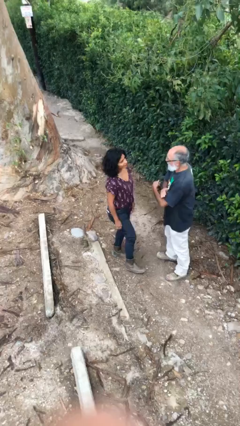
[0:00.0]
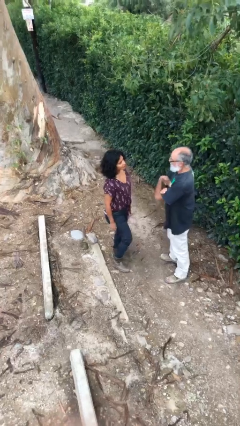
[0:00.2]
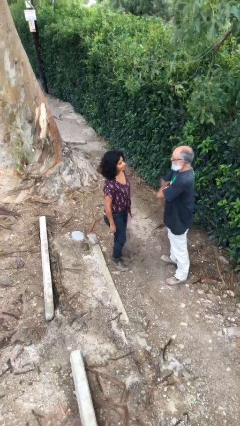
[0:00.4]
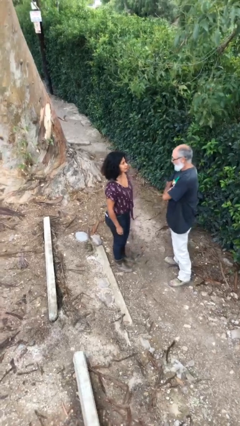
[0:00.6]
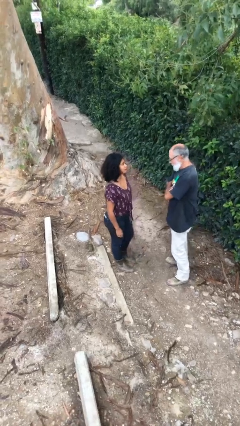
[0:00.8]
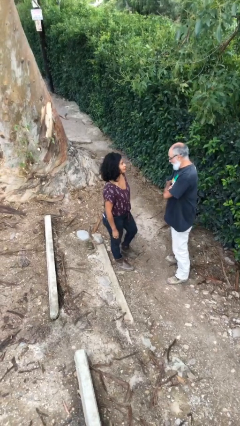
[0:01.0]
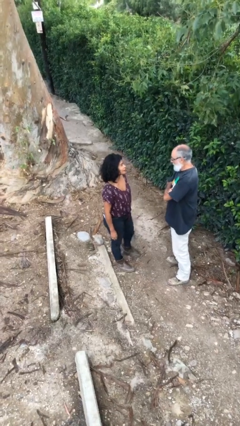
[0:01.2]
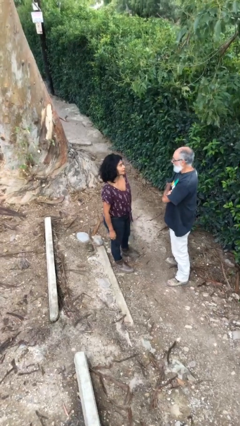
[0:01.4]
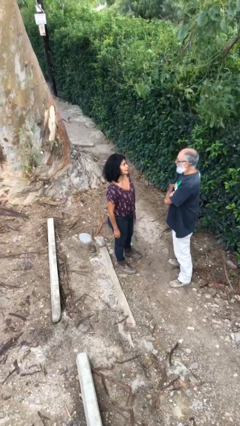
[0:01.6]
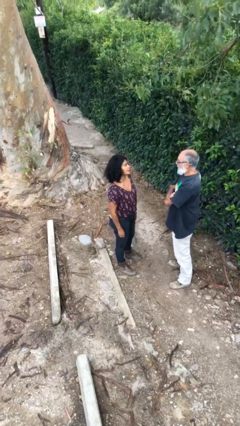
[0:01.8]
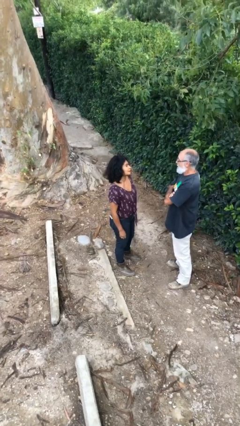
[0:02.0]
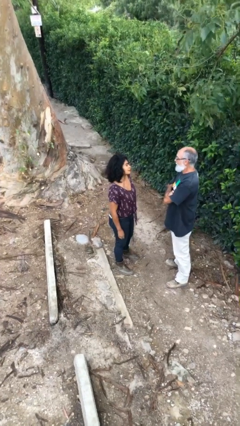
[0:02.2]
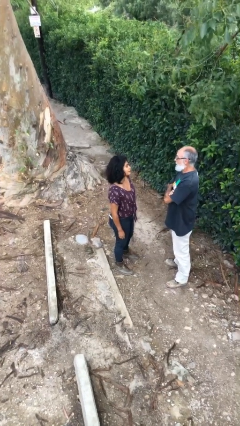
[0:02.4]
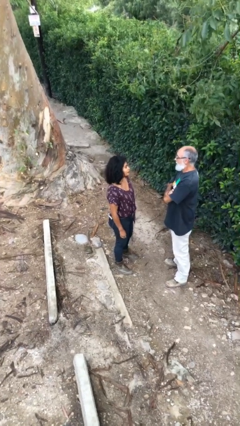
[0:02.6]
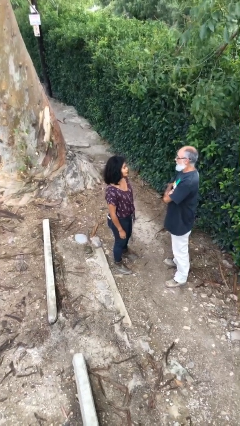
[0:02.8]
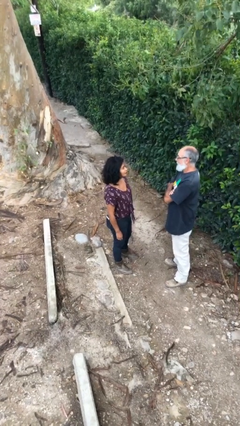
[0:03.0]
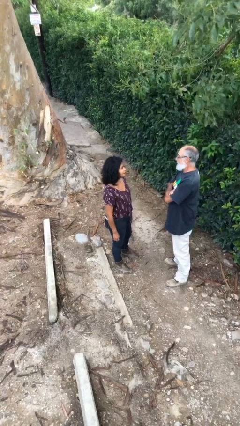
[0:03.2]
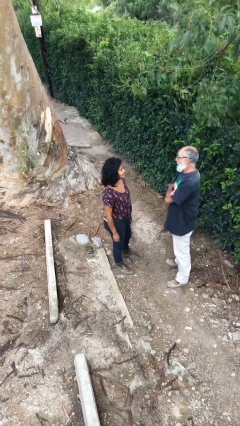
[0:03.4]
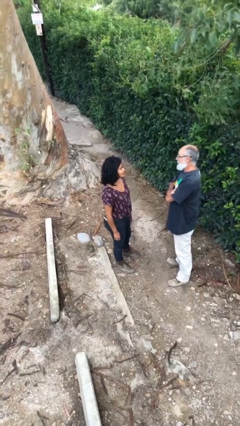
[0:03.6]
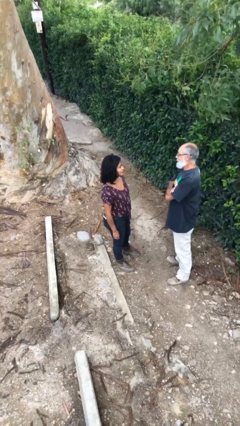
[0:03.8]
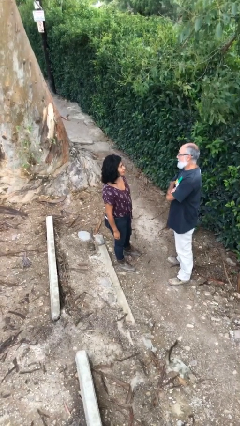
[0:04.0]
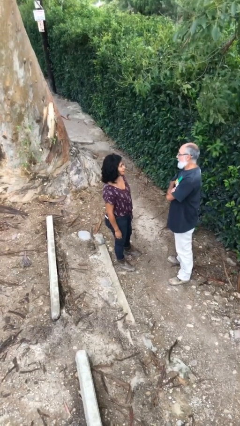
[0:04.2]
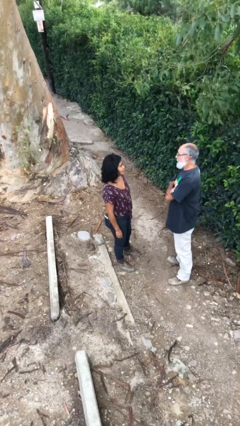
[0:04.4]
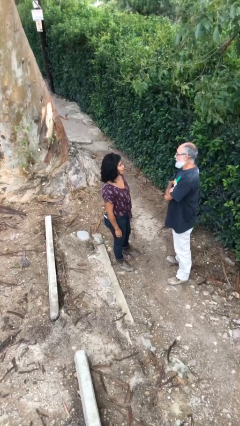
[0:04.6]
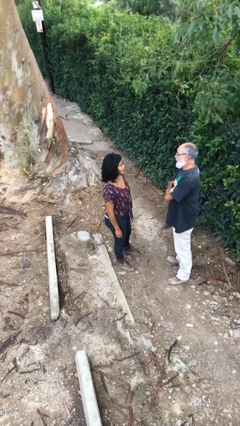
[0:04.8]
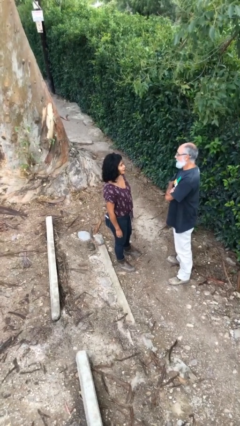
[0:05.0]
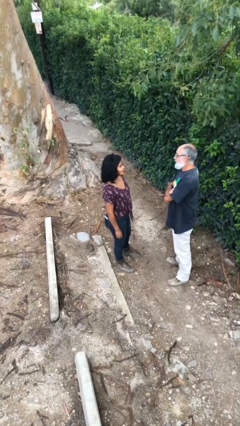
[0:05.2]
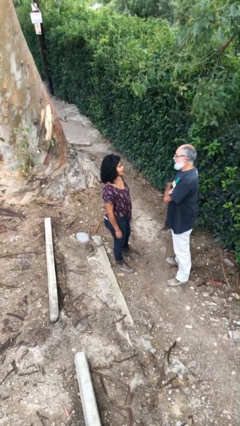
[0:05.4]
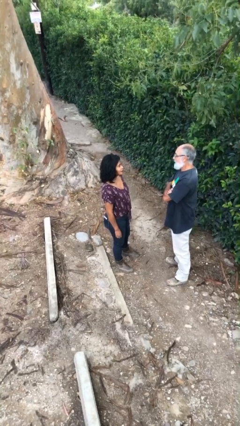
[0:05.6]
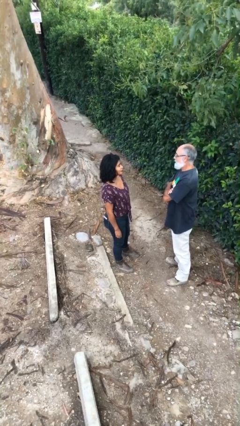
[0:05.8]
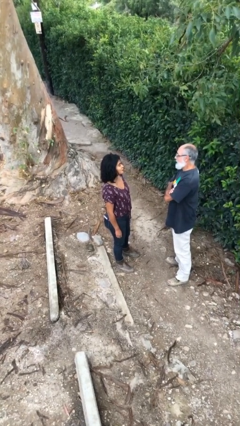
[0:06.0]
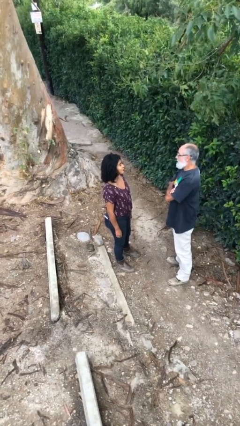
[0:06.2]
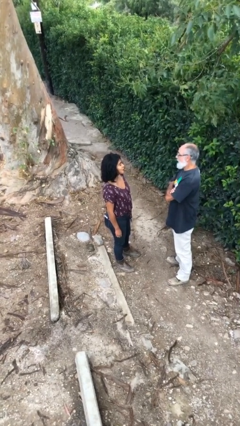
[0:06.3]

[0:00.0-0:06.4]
person talks to person

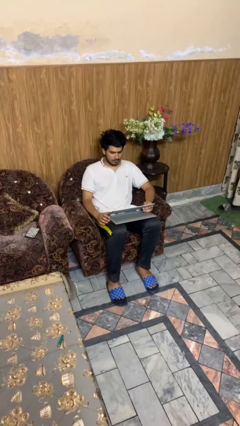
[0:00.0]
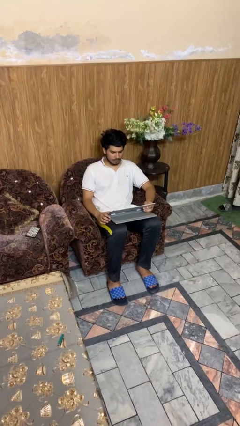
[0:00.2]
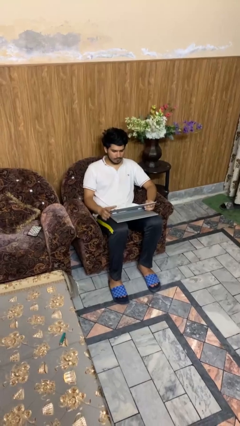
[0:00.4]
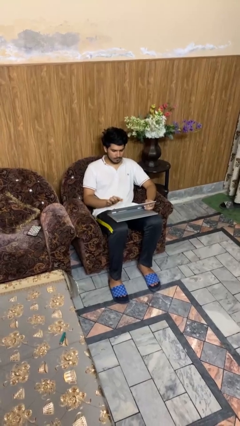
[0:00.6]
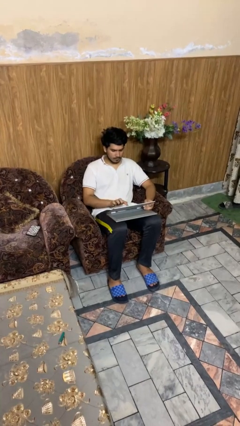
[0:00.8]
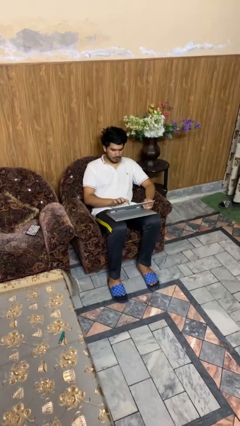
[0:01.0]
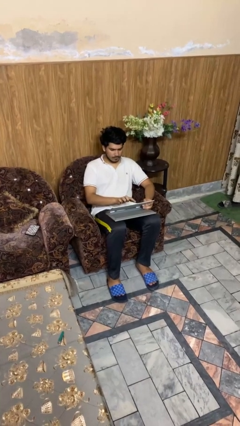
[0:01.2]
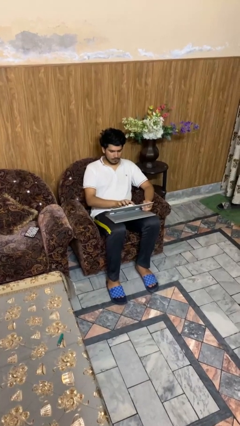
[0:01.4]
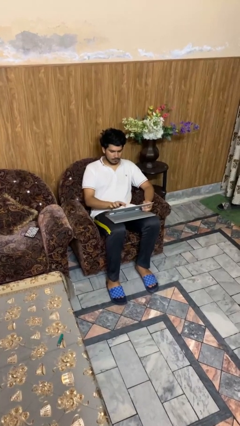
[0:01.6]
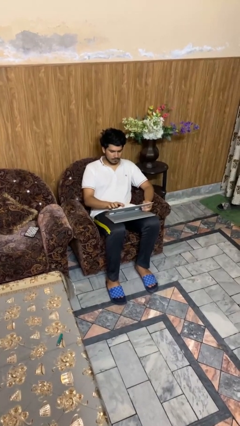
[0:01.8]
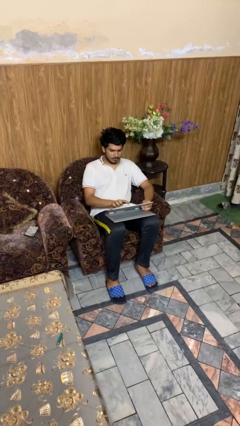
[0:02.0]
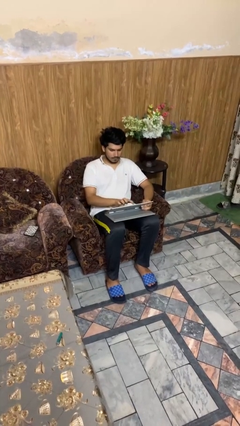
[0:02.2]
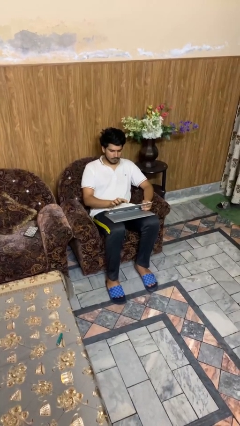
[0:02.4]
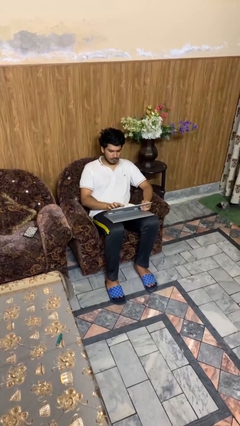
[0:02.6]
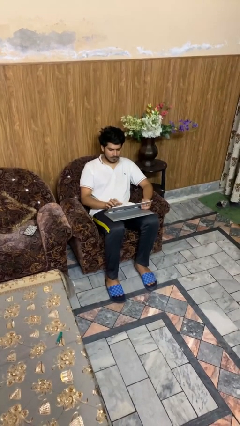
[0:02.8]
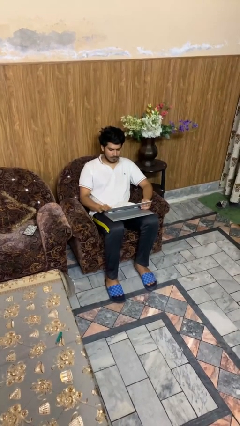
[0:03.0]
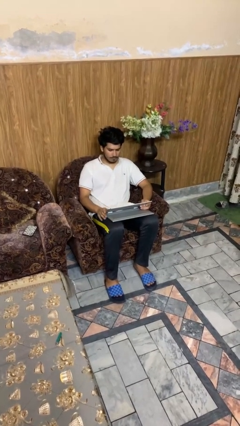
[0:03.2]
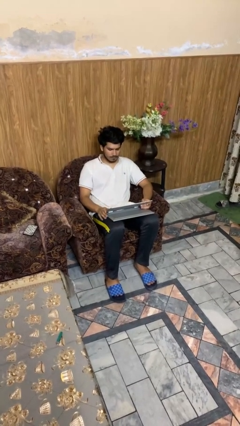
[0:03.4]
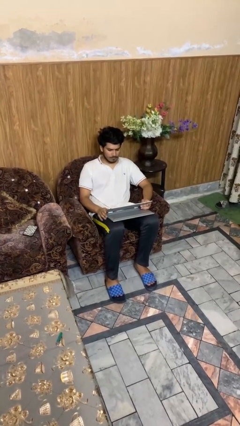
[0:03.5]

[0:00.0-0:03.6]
person interacts with tablet

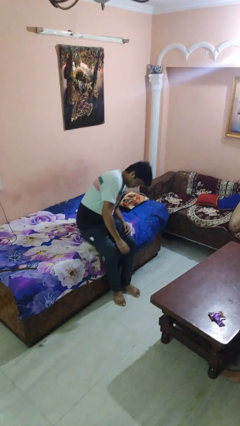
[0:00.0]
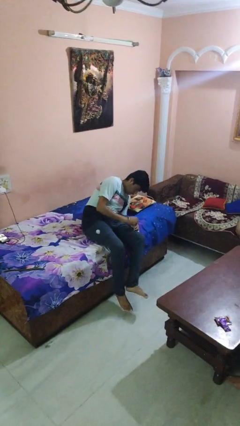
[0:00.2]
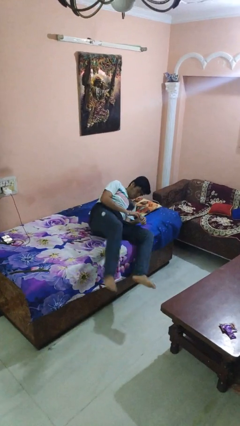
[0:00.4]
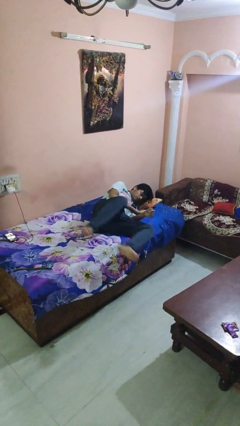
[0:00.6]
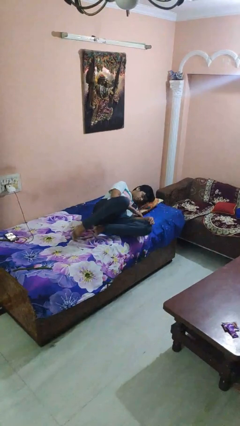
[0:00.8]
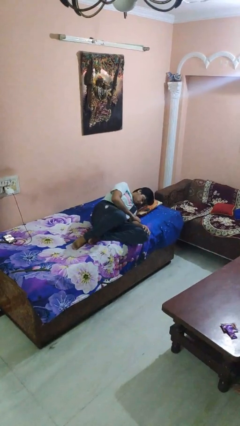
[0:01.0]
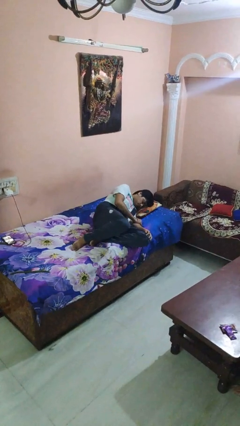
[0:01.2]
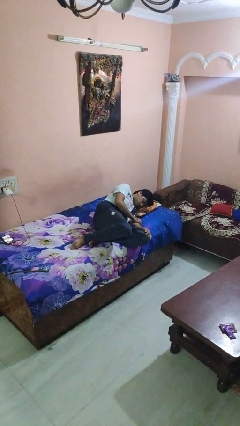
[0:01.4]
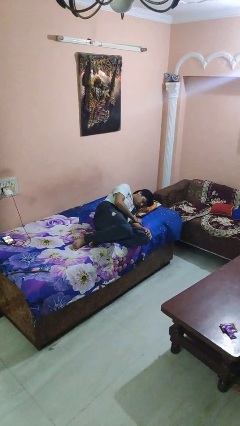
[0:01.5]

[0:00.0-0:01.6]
person lies down on bed

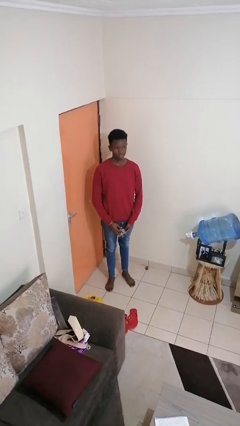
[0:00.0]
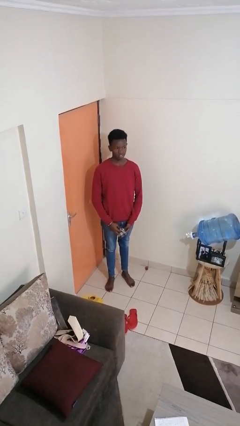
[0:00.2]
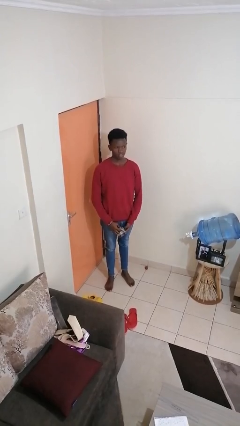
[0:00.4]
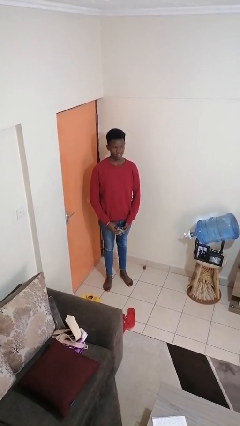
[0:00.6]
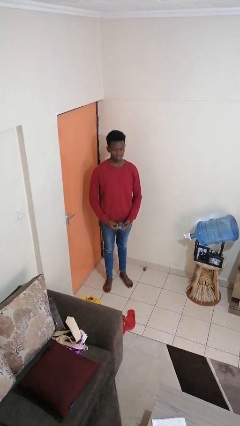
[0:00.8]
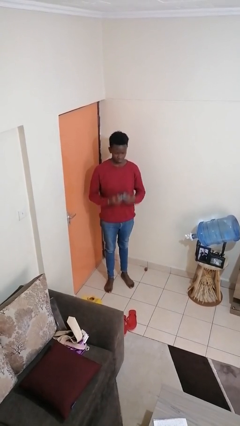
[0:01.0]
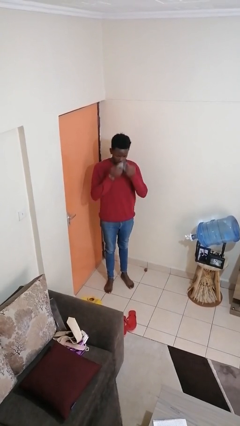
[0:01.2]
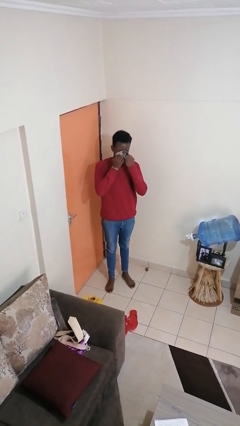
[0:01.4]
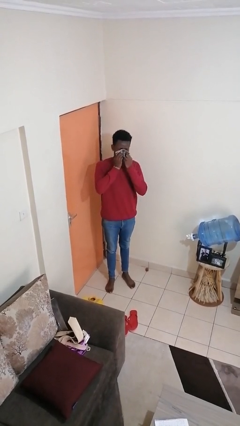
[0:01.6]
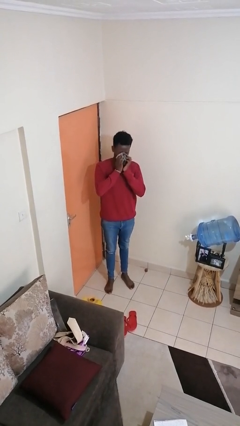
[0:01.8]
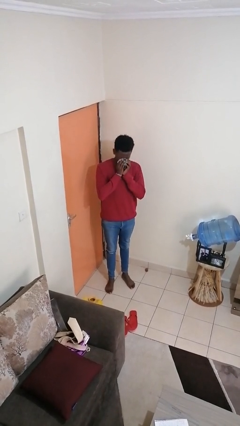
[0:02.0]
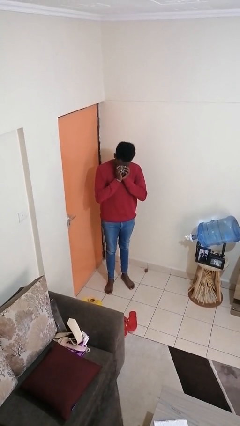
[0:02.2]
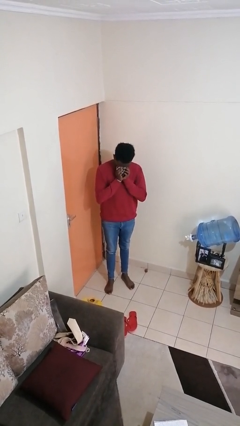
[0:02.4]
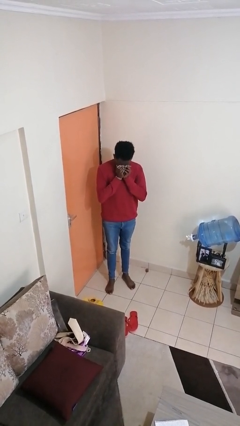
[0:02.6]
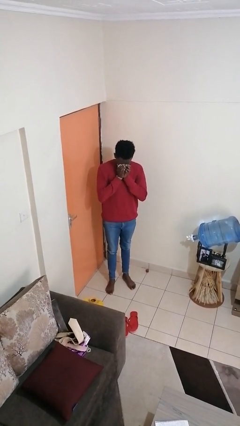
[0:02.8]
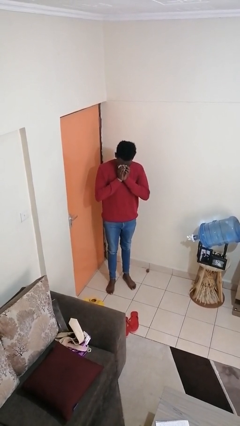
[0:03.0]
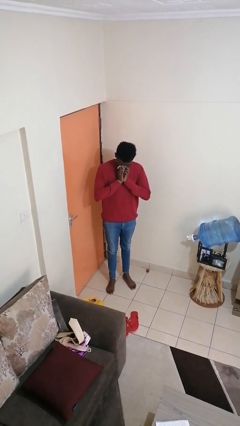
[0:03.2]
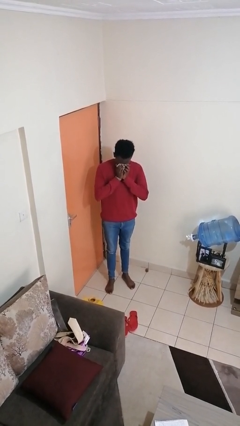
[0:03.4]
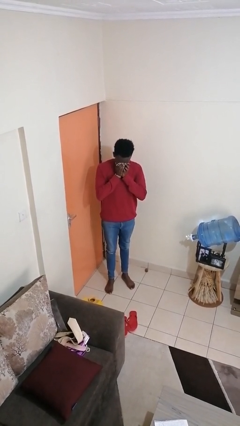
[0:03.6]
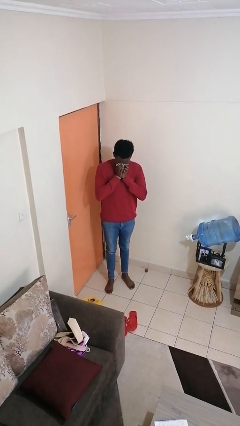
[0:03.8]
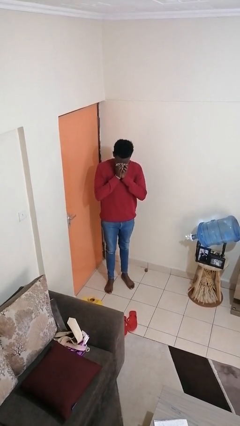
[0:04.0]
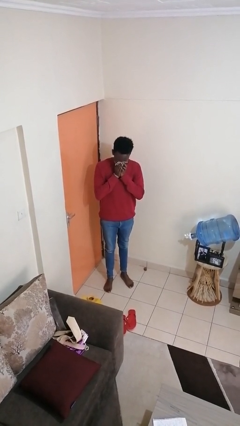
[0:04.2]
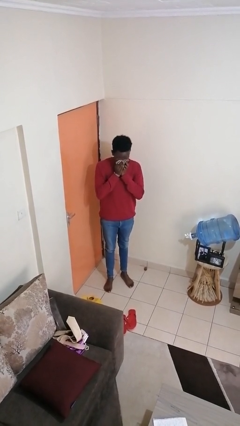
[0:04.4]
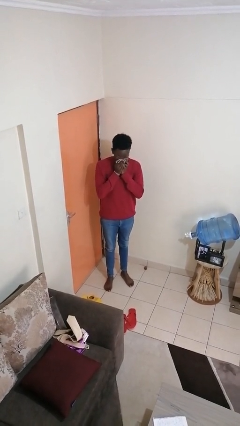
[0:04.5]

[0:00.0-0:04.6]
person blows nose

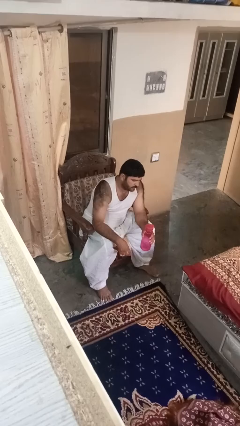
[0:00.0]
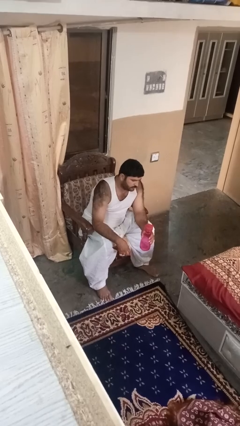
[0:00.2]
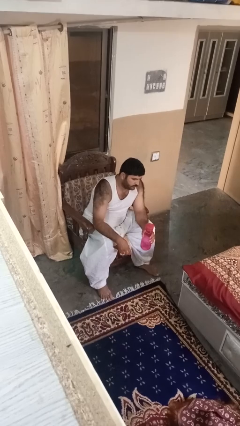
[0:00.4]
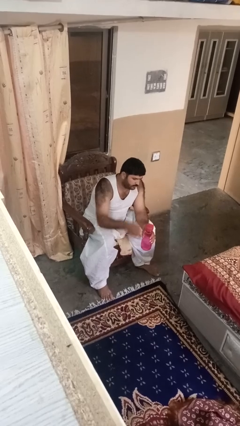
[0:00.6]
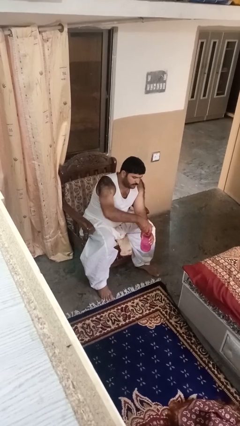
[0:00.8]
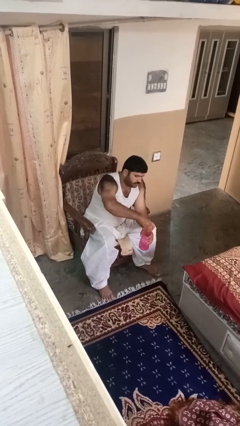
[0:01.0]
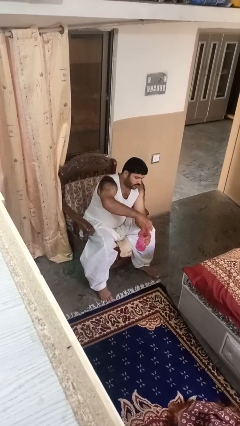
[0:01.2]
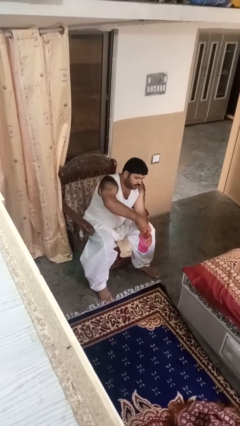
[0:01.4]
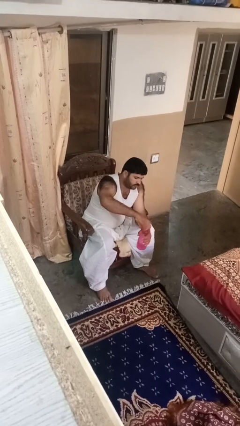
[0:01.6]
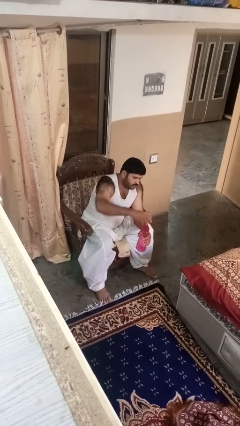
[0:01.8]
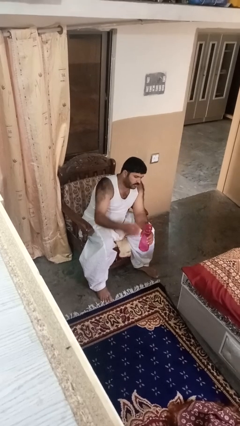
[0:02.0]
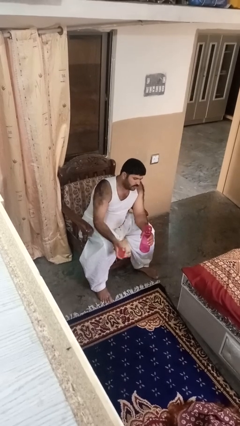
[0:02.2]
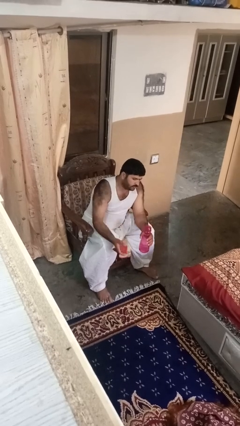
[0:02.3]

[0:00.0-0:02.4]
person unscrews lid from bottle
